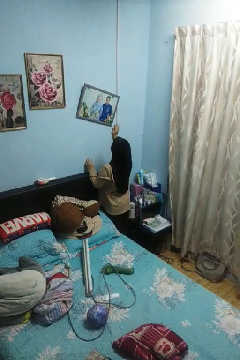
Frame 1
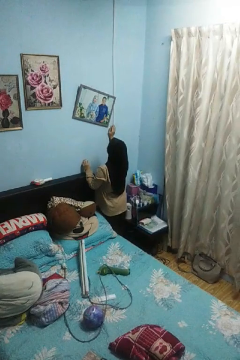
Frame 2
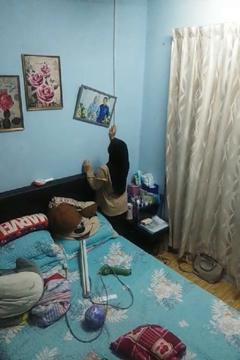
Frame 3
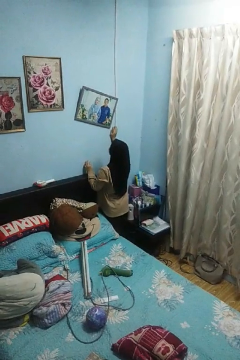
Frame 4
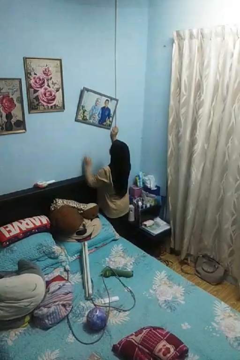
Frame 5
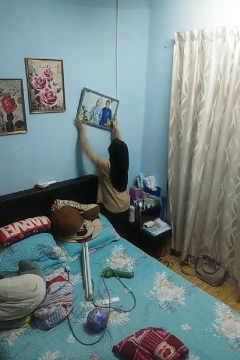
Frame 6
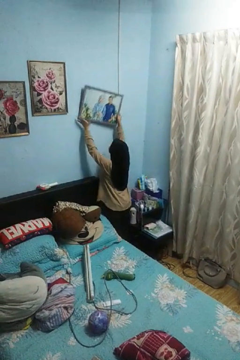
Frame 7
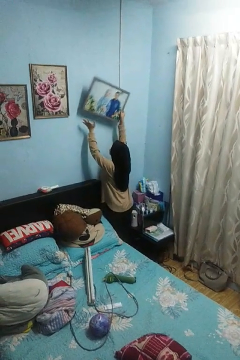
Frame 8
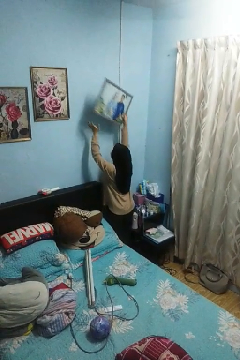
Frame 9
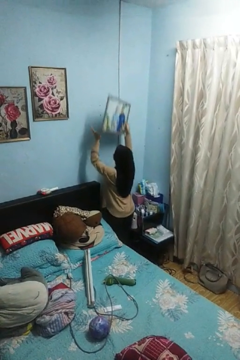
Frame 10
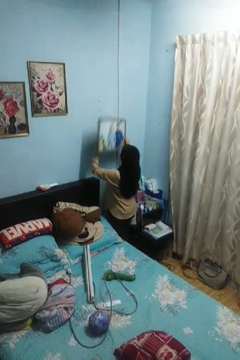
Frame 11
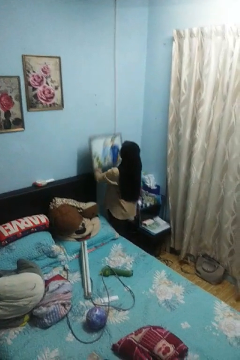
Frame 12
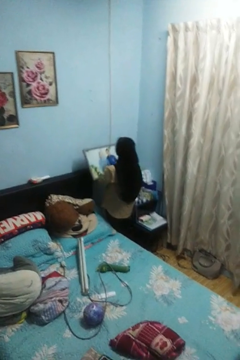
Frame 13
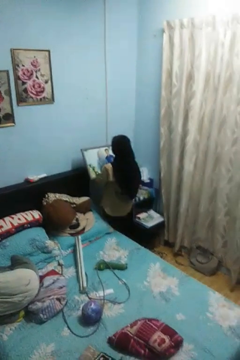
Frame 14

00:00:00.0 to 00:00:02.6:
person takes down picture frame

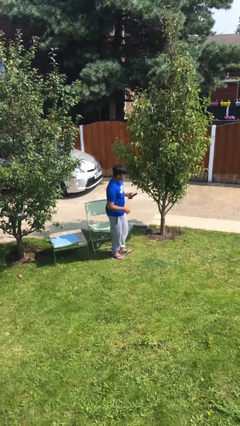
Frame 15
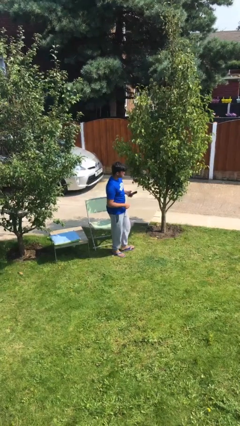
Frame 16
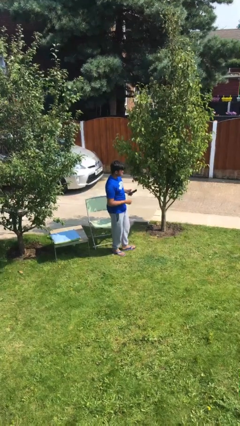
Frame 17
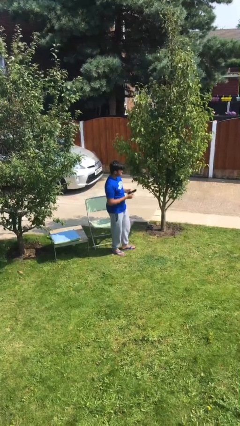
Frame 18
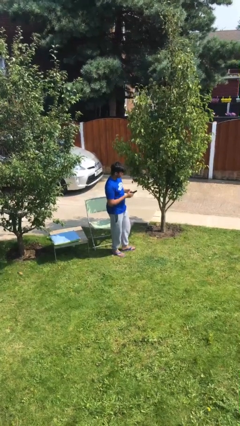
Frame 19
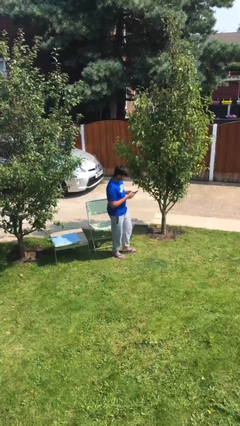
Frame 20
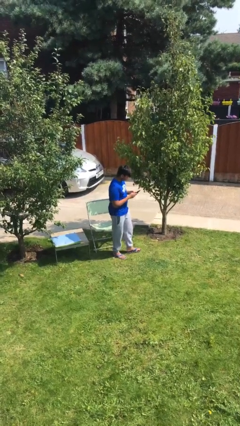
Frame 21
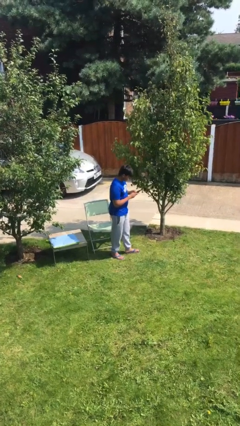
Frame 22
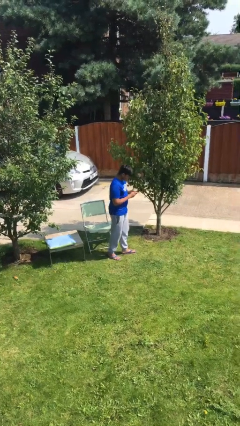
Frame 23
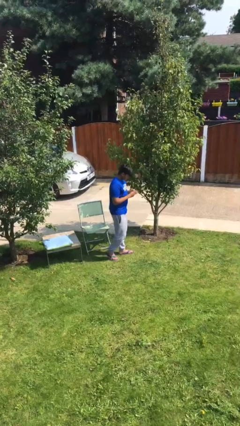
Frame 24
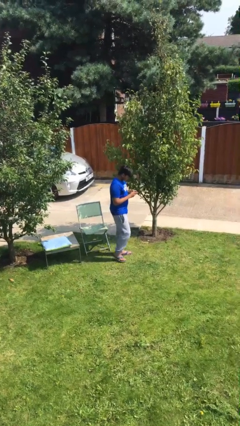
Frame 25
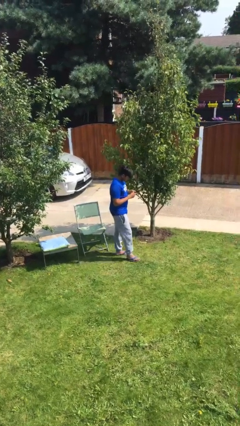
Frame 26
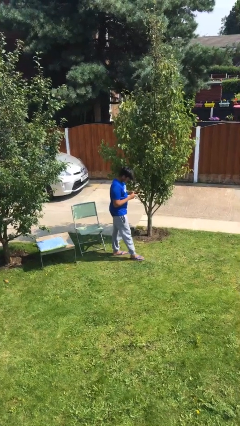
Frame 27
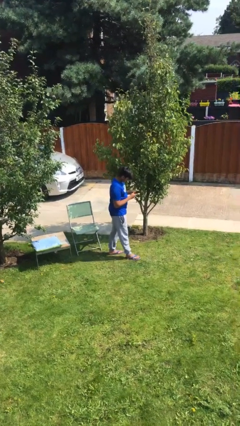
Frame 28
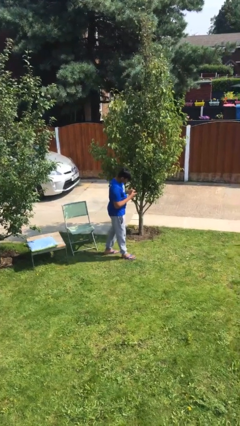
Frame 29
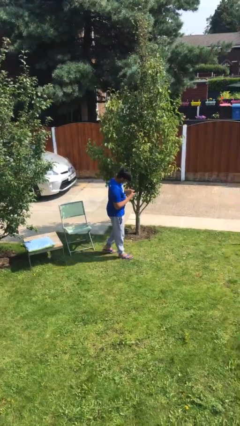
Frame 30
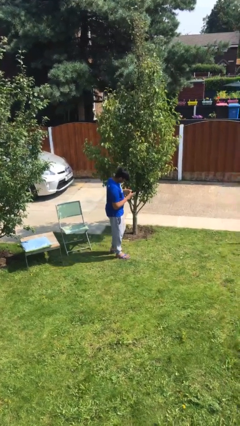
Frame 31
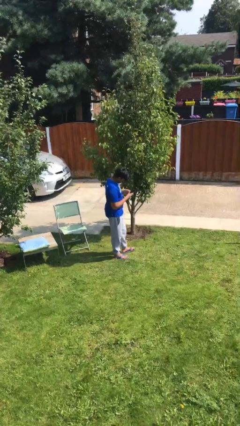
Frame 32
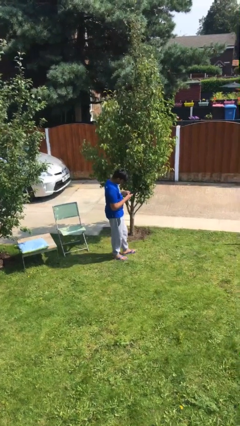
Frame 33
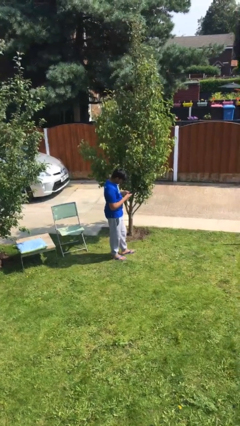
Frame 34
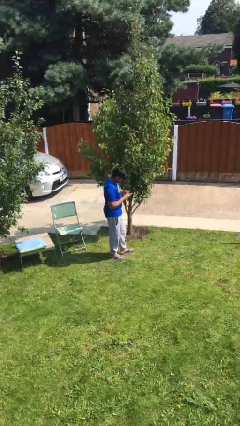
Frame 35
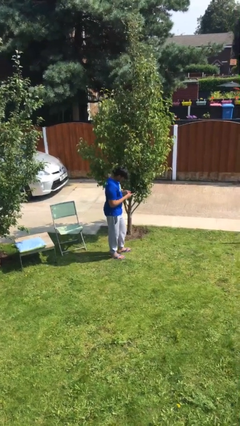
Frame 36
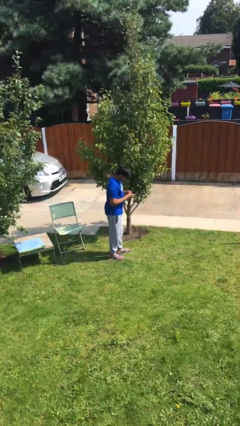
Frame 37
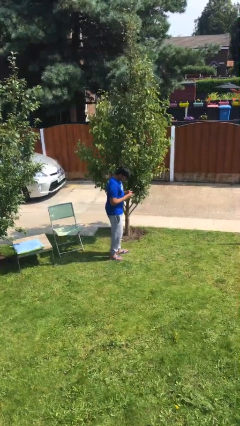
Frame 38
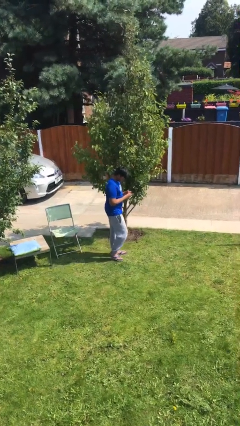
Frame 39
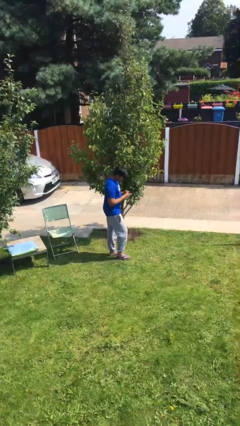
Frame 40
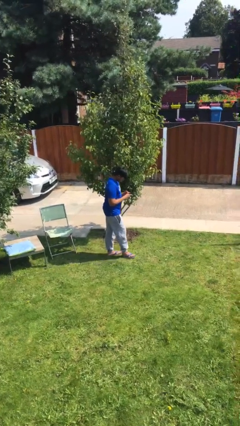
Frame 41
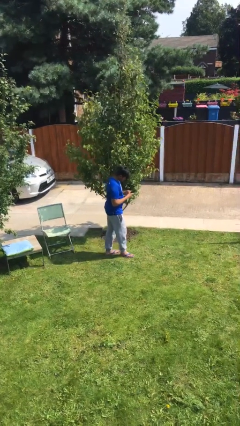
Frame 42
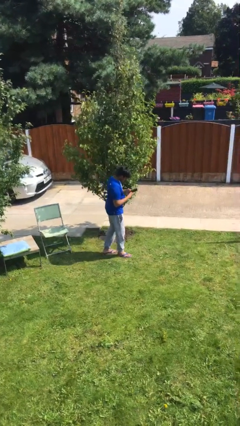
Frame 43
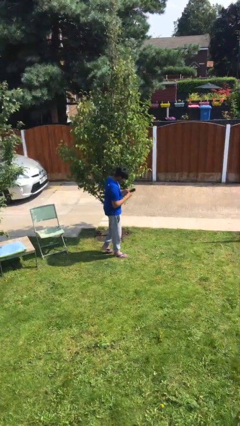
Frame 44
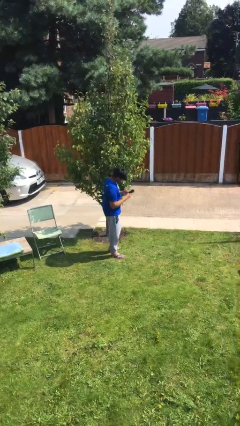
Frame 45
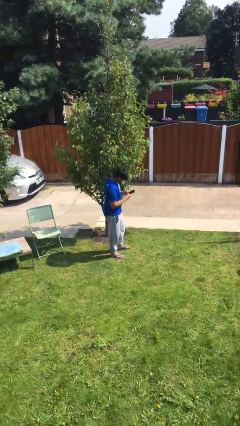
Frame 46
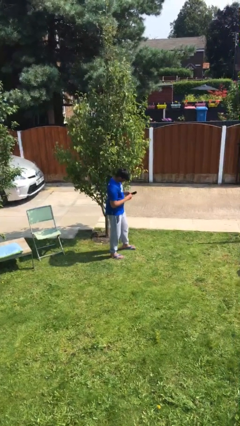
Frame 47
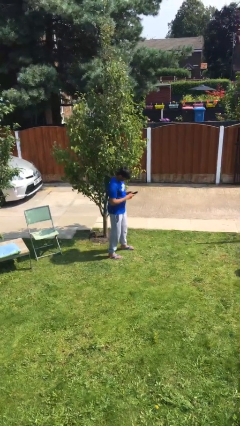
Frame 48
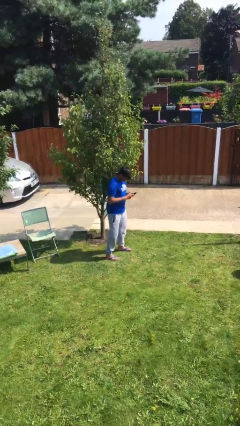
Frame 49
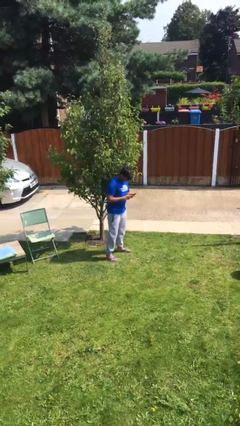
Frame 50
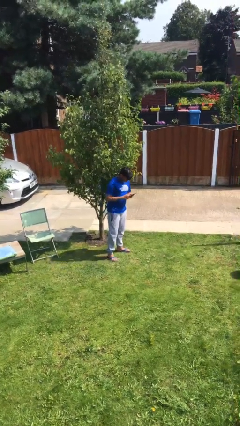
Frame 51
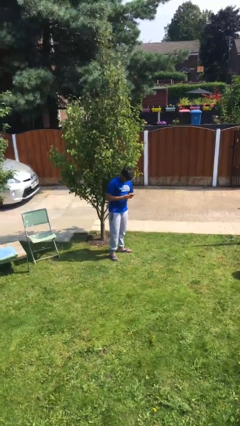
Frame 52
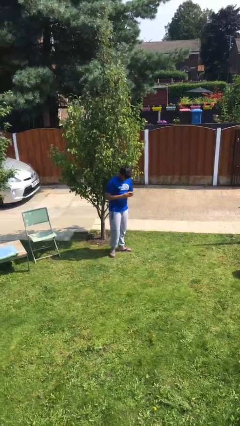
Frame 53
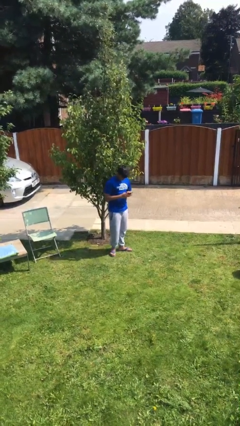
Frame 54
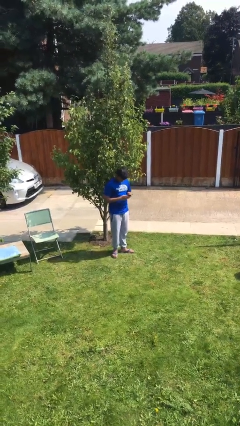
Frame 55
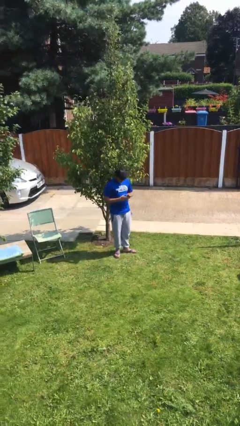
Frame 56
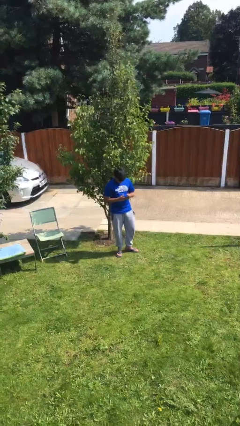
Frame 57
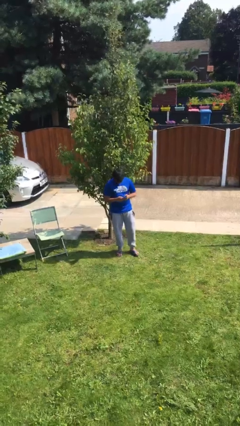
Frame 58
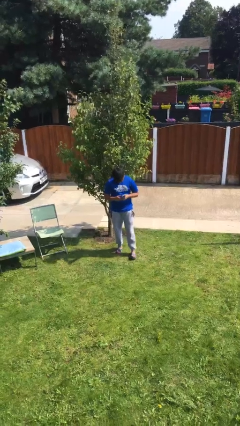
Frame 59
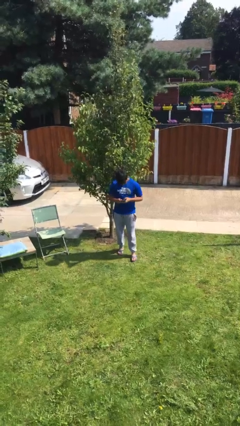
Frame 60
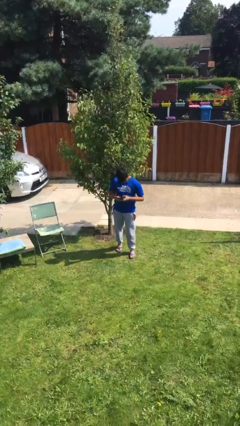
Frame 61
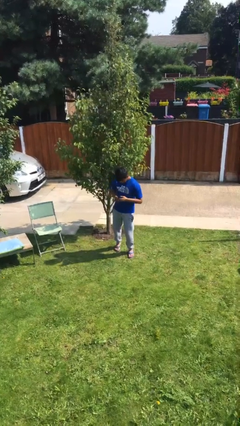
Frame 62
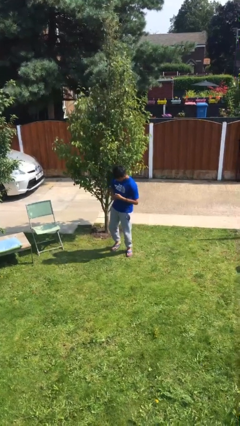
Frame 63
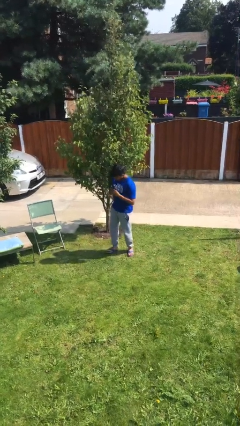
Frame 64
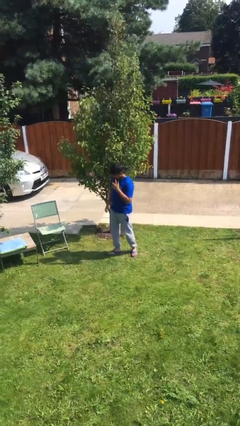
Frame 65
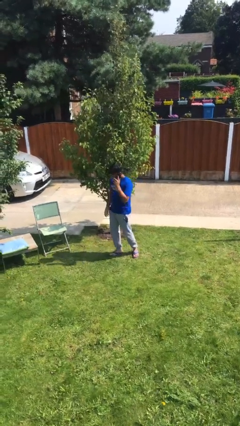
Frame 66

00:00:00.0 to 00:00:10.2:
person texts on phone

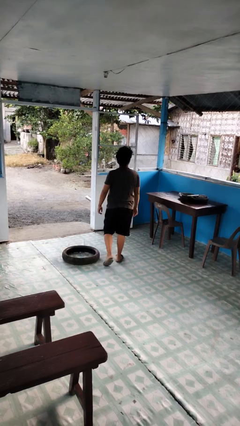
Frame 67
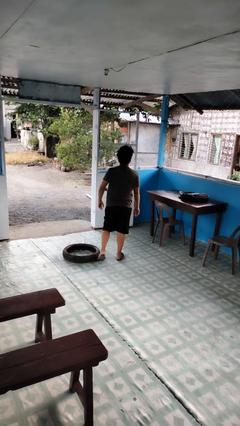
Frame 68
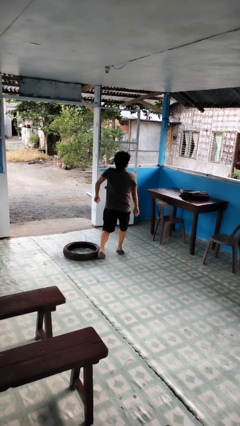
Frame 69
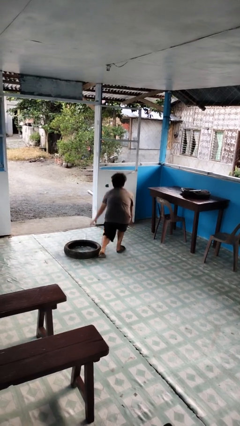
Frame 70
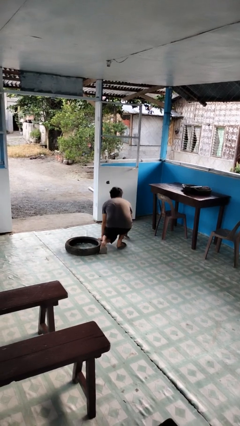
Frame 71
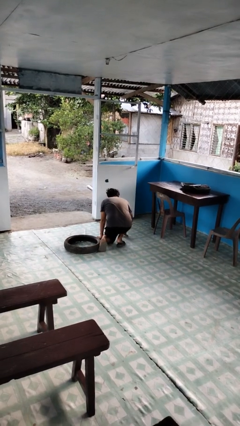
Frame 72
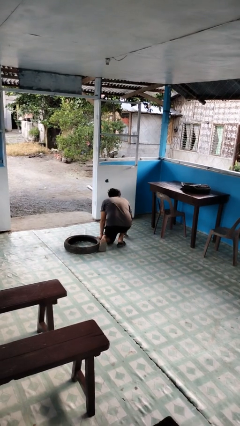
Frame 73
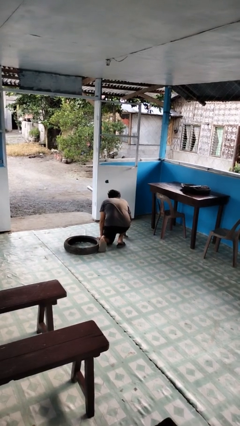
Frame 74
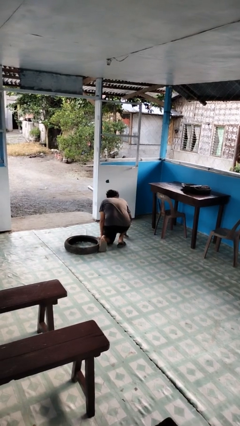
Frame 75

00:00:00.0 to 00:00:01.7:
person trips on object on floor

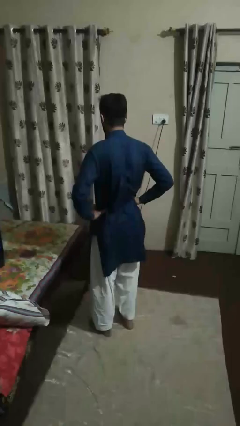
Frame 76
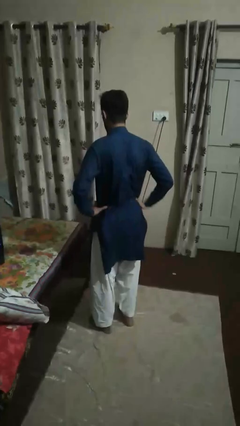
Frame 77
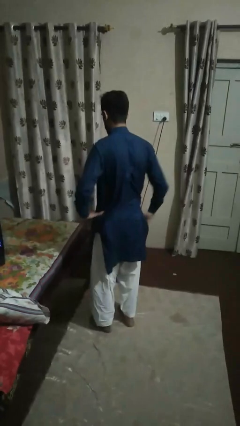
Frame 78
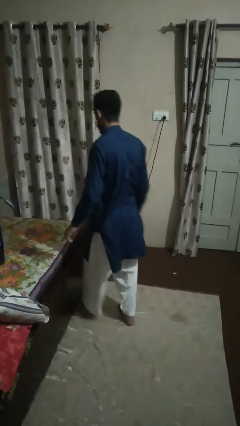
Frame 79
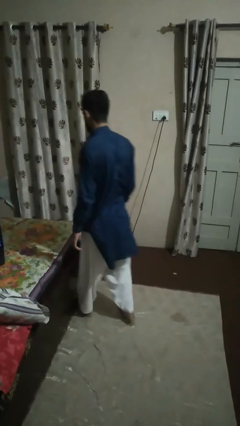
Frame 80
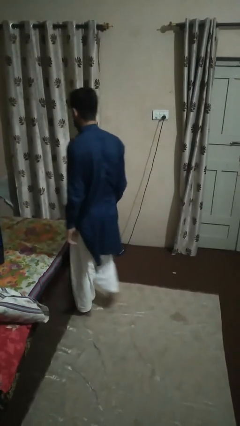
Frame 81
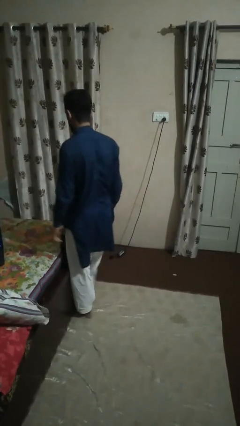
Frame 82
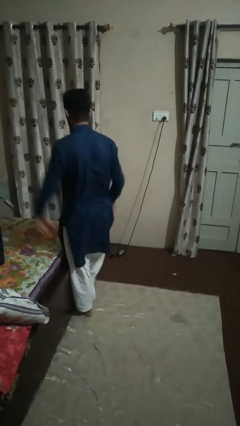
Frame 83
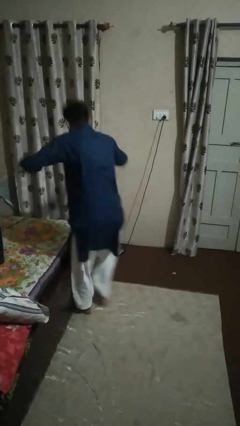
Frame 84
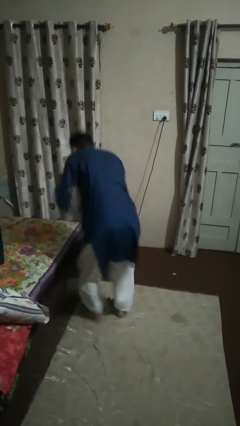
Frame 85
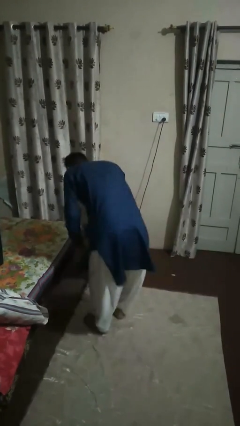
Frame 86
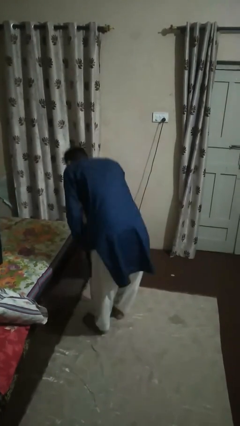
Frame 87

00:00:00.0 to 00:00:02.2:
person stubs toe

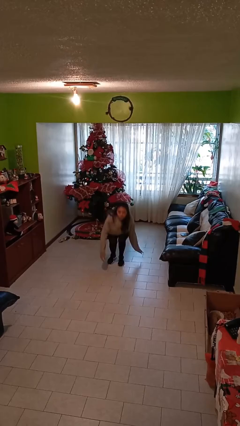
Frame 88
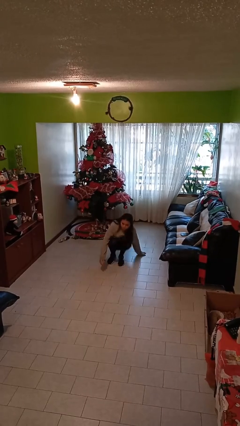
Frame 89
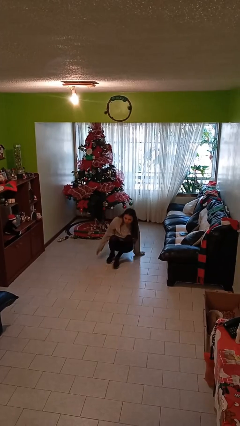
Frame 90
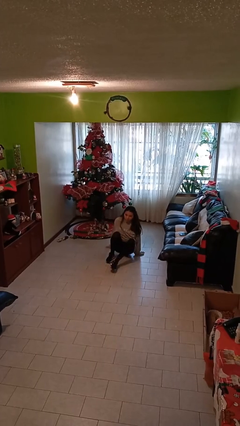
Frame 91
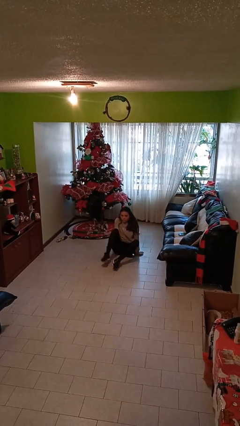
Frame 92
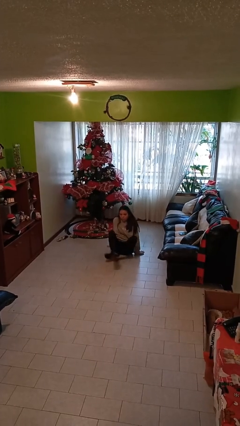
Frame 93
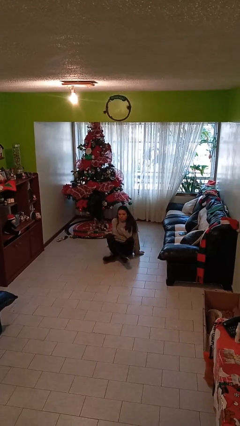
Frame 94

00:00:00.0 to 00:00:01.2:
person sits down

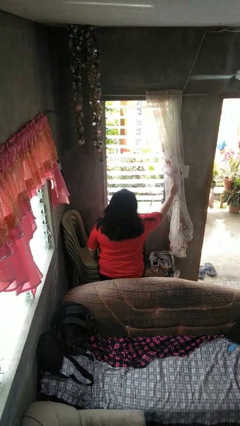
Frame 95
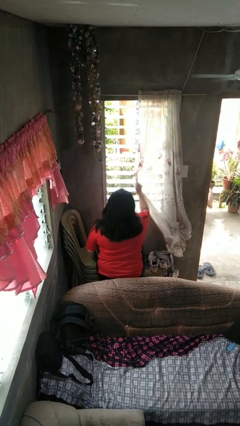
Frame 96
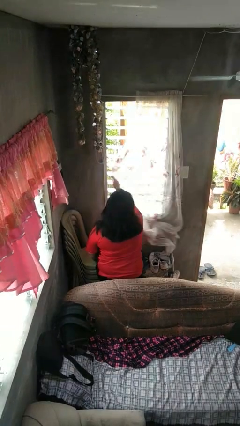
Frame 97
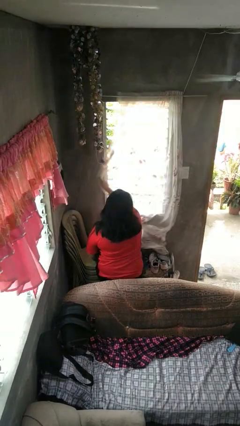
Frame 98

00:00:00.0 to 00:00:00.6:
person closes curtains
